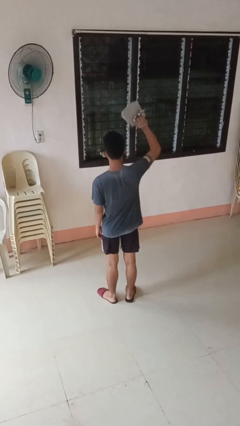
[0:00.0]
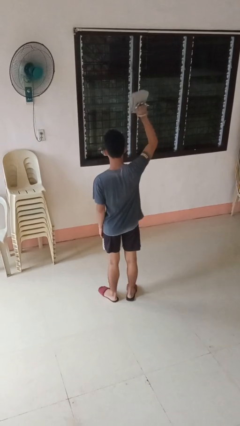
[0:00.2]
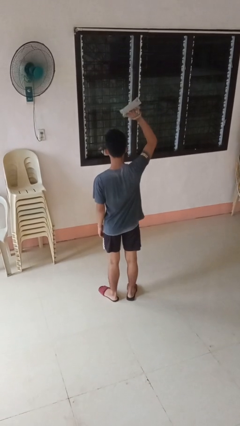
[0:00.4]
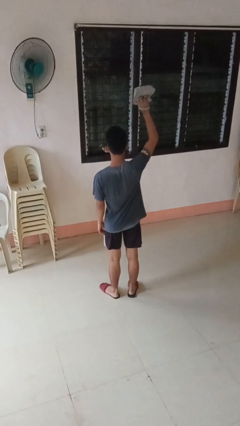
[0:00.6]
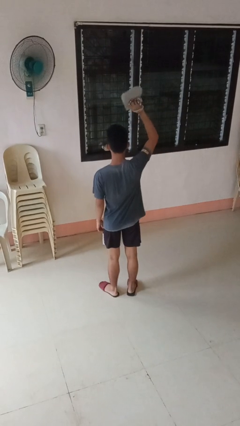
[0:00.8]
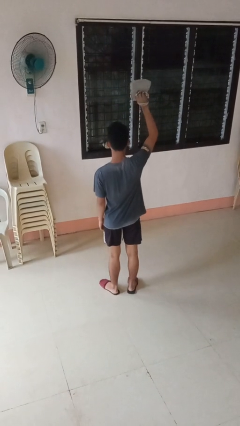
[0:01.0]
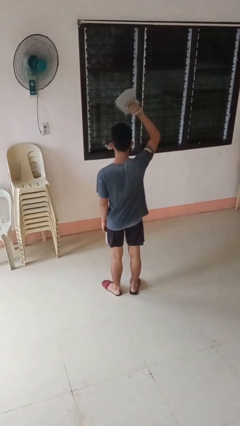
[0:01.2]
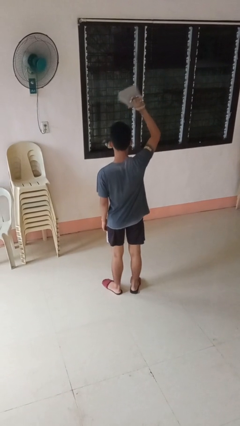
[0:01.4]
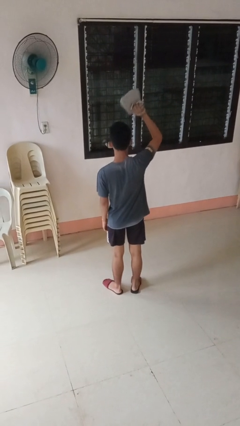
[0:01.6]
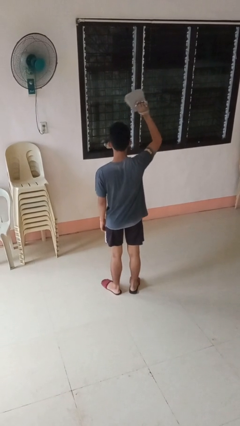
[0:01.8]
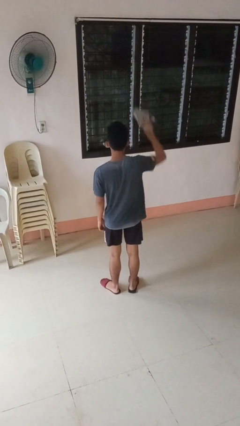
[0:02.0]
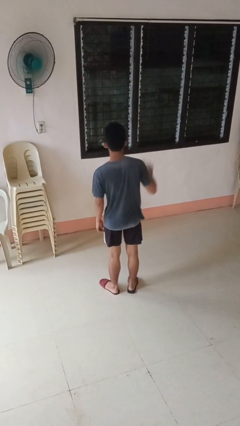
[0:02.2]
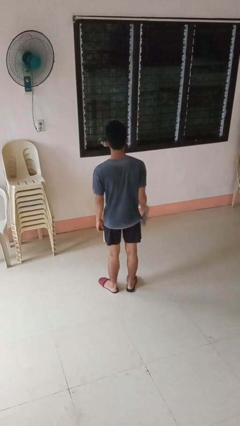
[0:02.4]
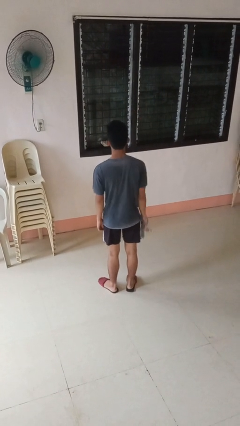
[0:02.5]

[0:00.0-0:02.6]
person holds object above head

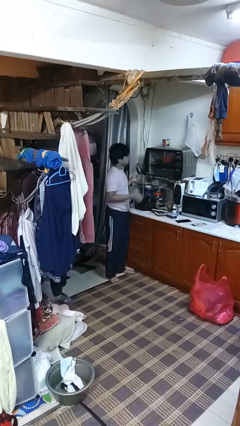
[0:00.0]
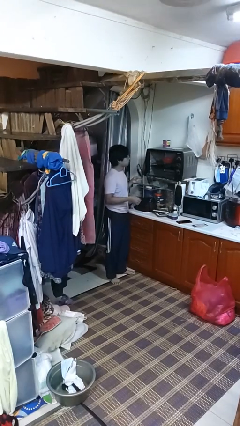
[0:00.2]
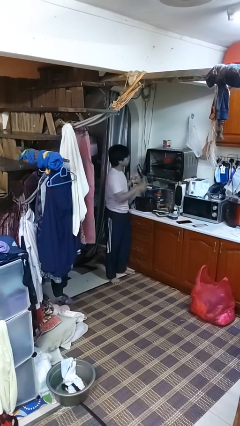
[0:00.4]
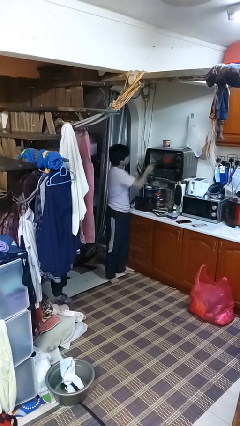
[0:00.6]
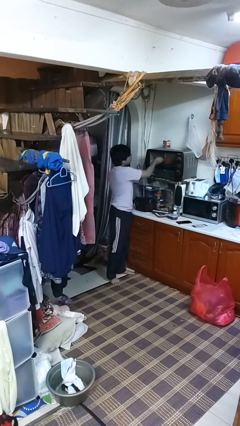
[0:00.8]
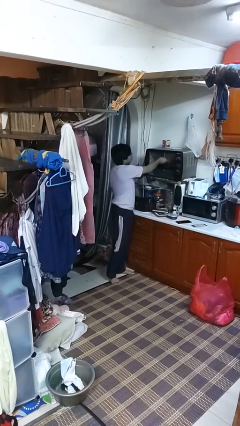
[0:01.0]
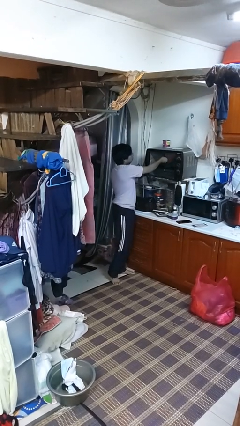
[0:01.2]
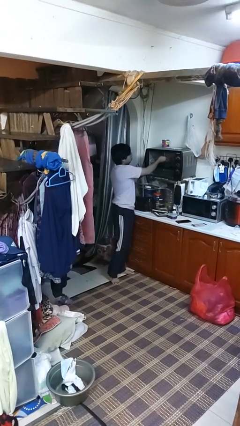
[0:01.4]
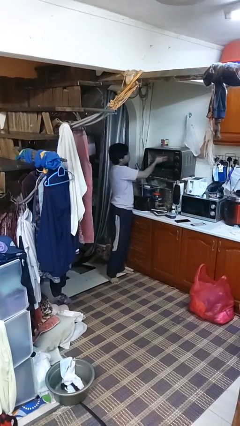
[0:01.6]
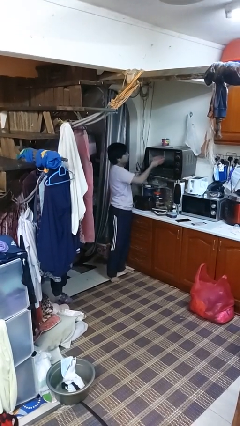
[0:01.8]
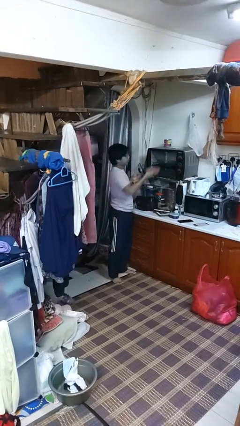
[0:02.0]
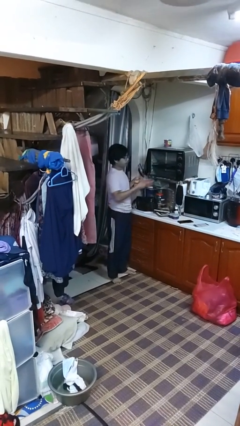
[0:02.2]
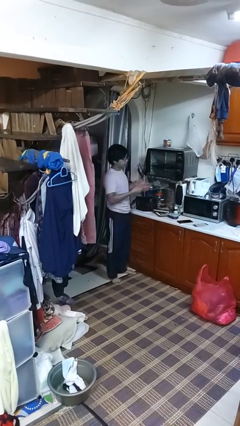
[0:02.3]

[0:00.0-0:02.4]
person takes object from oven

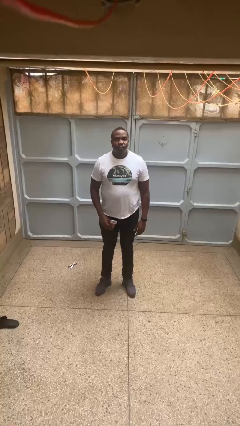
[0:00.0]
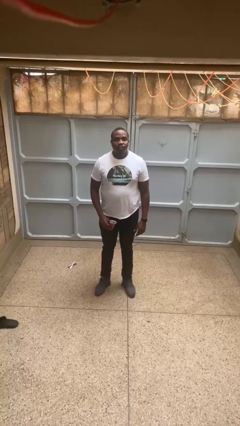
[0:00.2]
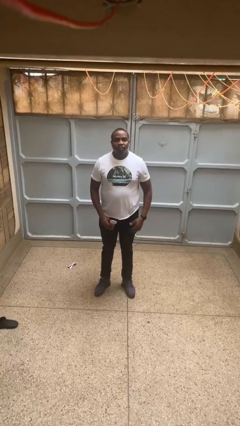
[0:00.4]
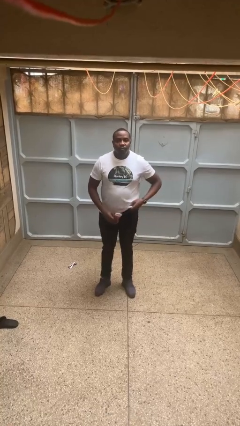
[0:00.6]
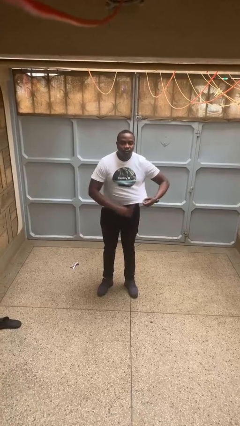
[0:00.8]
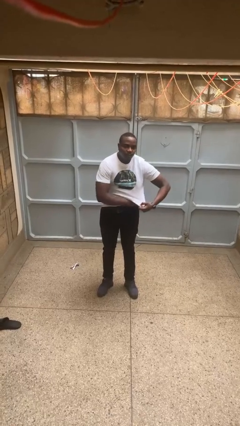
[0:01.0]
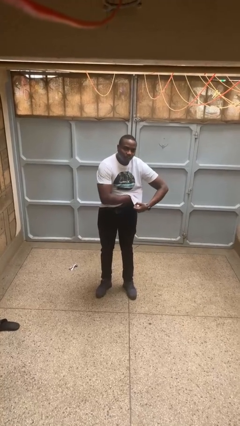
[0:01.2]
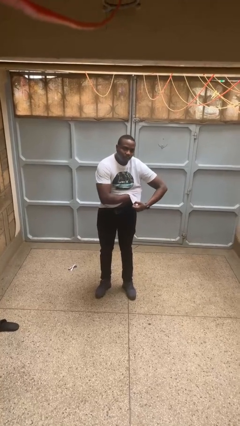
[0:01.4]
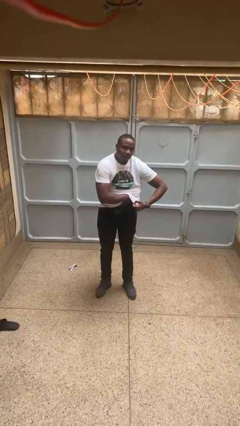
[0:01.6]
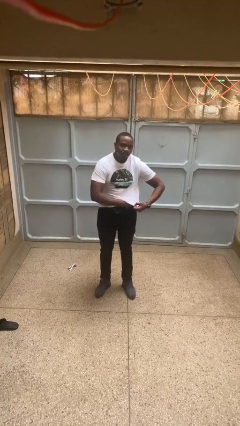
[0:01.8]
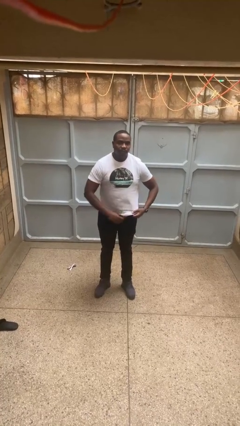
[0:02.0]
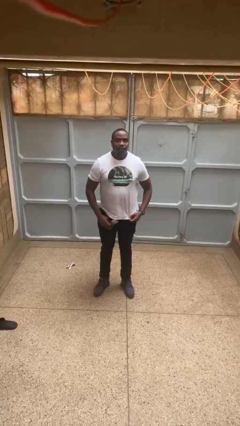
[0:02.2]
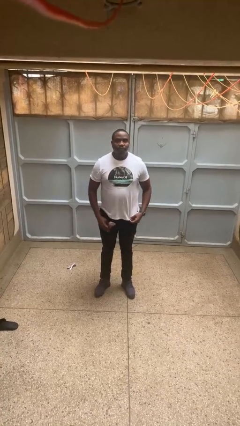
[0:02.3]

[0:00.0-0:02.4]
person applies deodorant

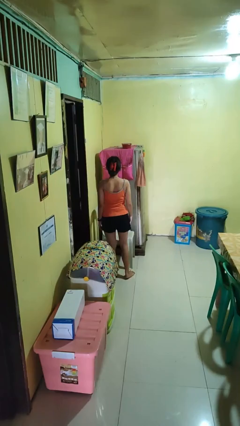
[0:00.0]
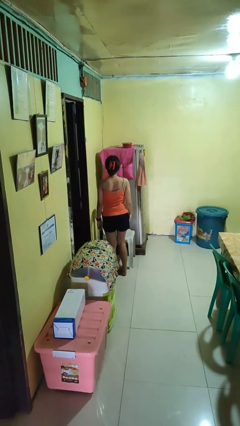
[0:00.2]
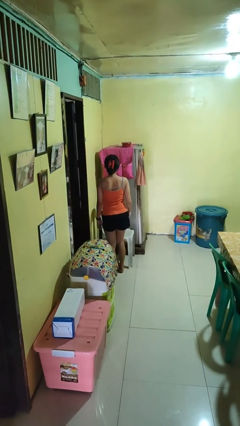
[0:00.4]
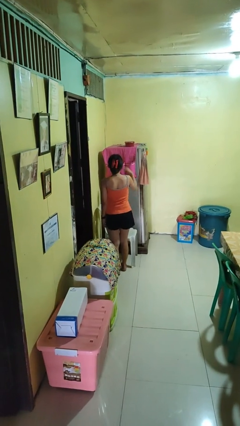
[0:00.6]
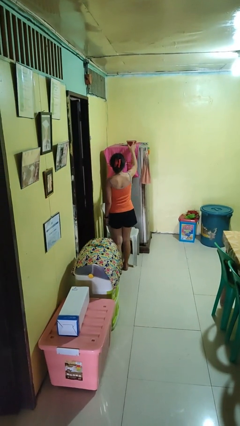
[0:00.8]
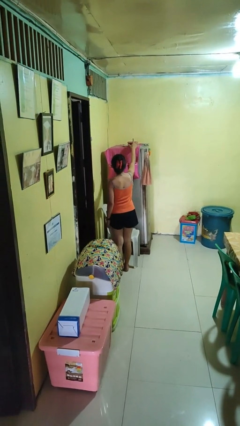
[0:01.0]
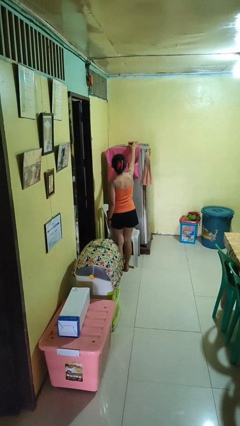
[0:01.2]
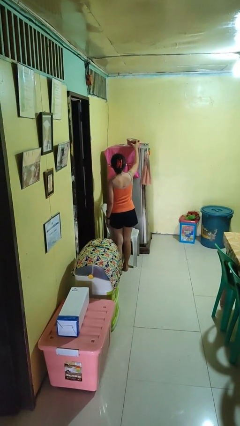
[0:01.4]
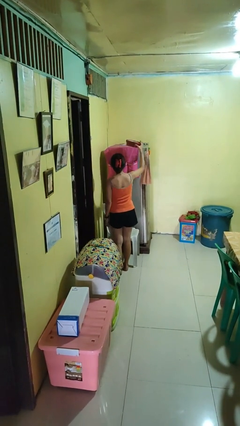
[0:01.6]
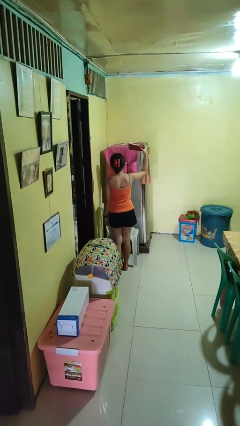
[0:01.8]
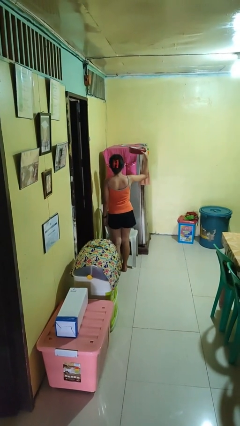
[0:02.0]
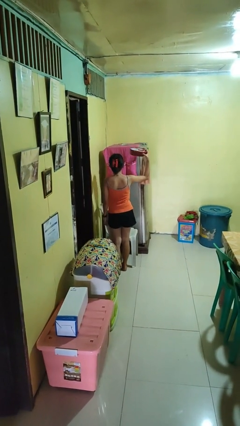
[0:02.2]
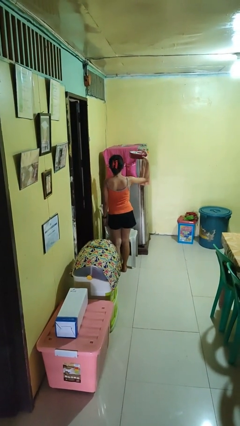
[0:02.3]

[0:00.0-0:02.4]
person picks up object from shelf

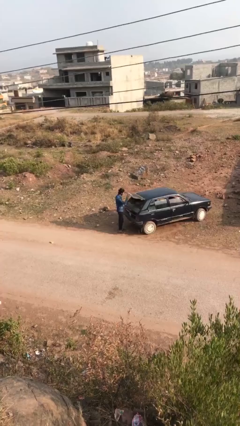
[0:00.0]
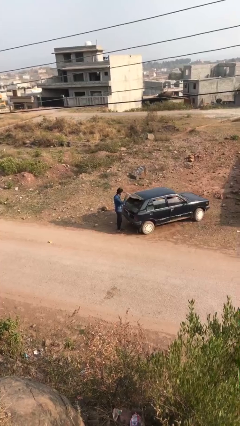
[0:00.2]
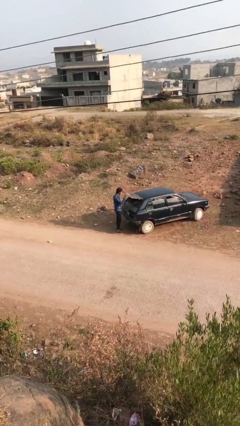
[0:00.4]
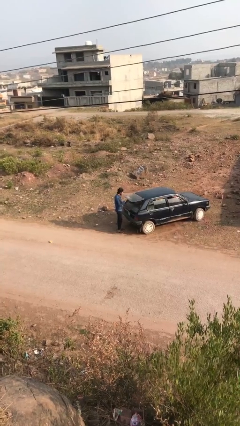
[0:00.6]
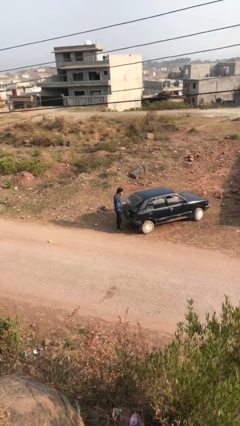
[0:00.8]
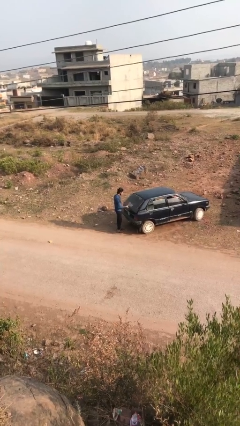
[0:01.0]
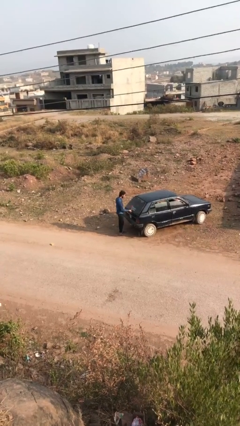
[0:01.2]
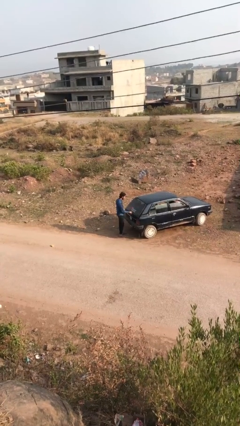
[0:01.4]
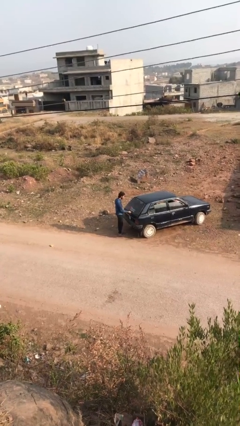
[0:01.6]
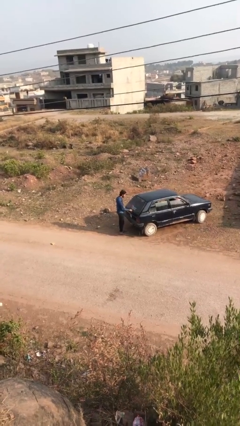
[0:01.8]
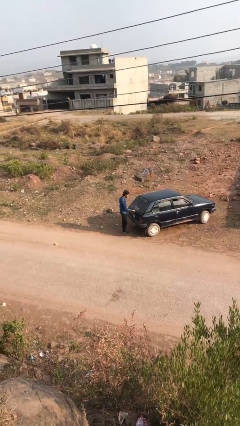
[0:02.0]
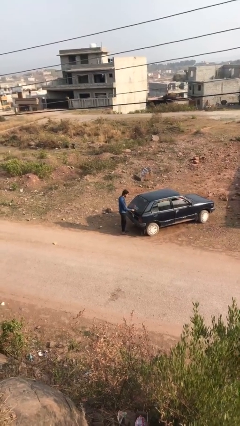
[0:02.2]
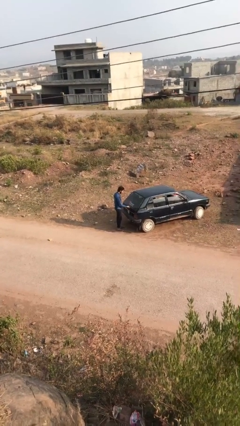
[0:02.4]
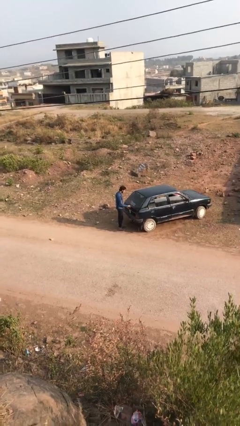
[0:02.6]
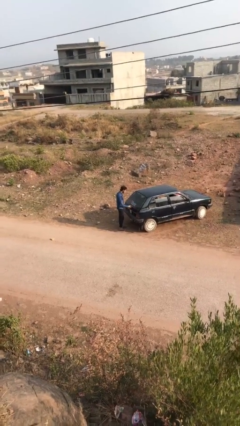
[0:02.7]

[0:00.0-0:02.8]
person closes car trunk

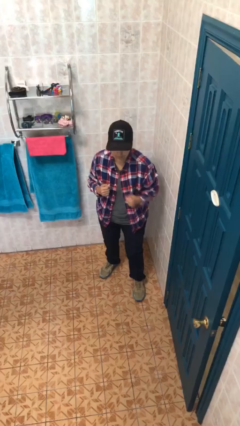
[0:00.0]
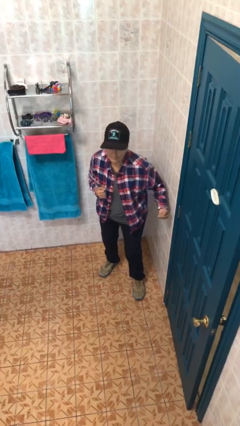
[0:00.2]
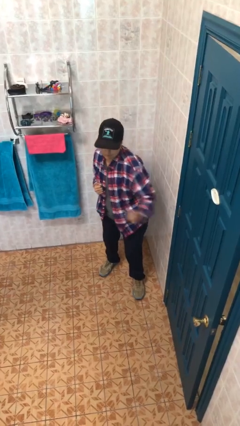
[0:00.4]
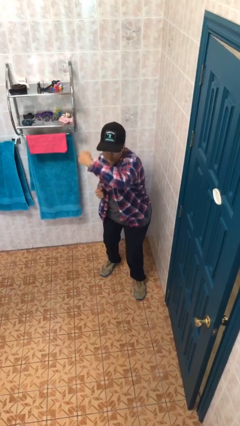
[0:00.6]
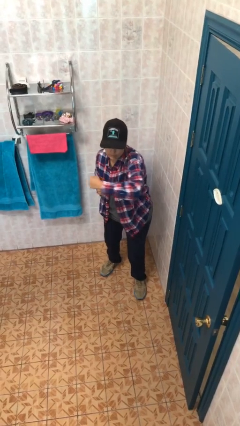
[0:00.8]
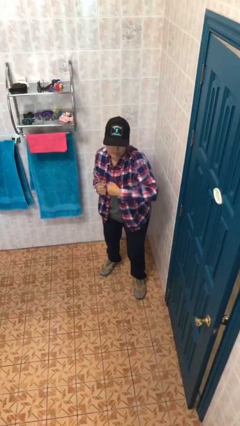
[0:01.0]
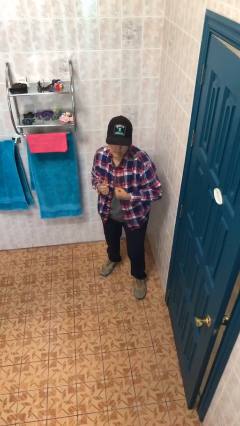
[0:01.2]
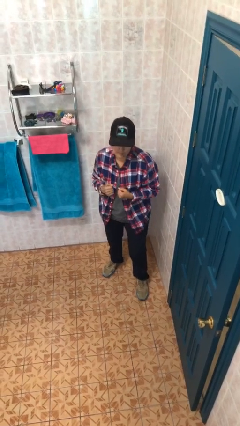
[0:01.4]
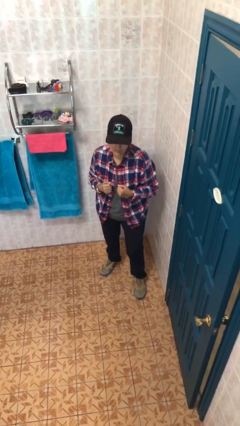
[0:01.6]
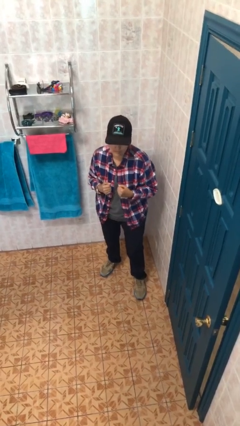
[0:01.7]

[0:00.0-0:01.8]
person punches

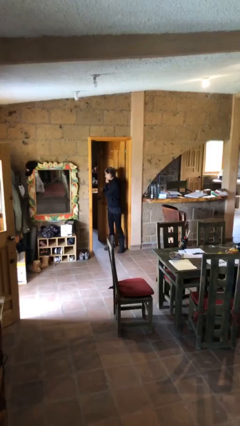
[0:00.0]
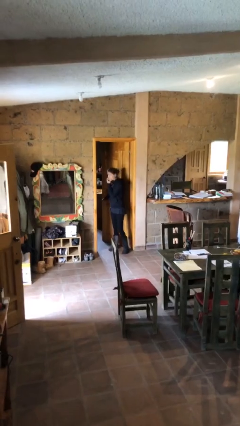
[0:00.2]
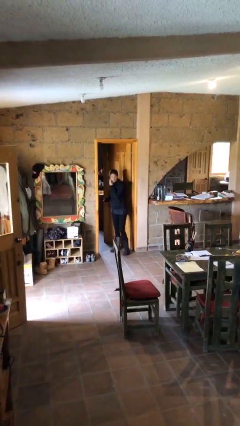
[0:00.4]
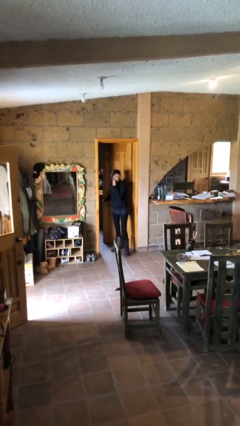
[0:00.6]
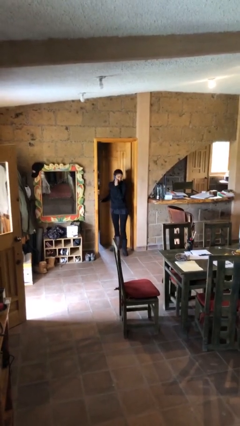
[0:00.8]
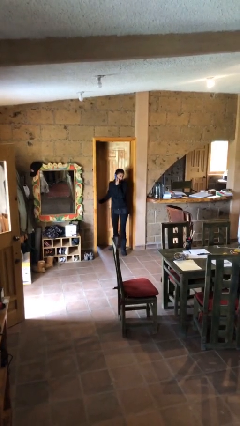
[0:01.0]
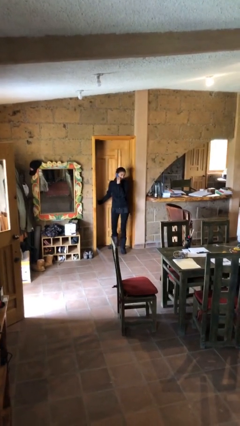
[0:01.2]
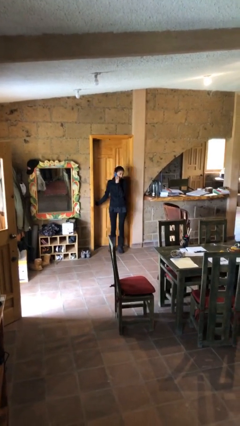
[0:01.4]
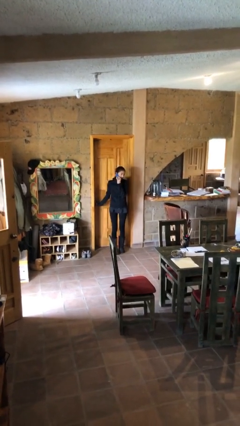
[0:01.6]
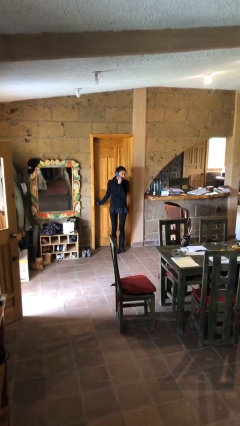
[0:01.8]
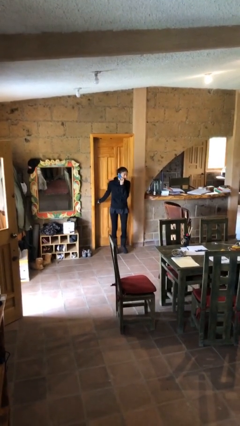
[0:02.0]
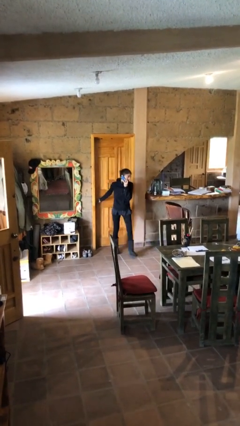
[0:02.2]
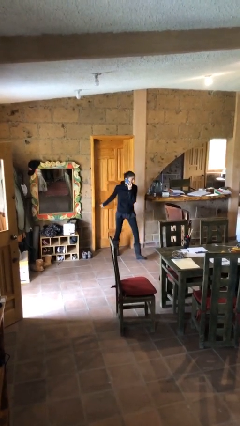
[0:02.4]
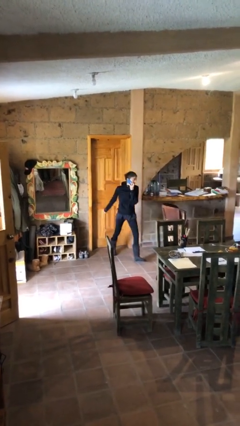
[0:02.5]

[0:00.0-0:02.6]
person closes facility door

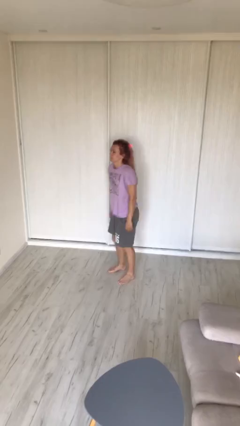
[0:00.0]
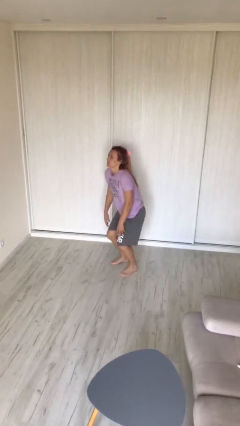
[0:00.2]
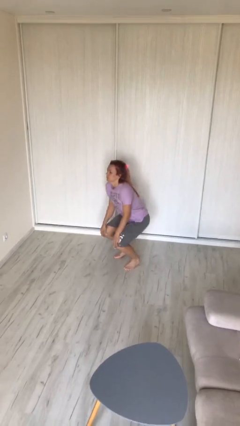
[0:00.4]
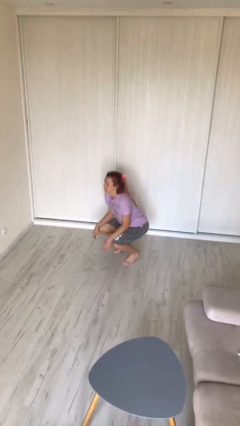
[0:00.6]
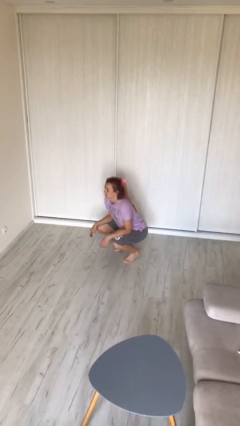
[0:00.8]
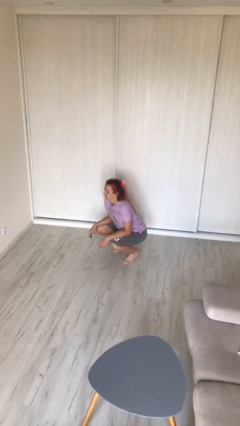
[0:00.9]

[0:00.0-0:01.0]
person squats
